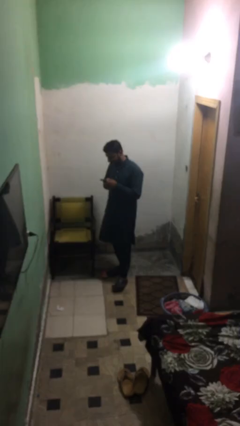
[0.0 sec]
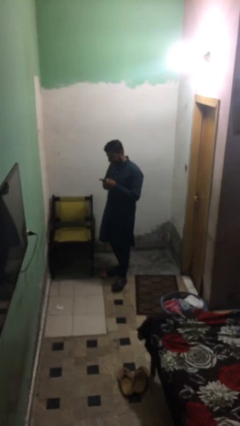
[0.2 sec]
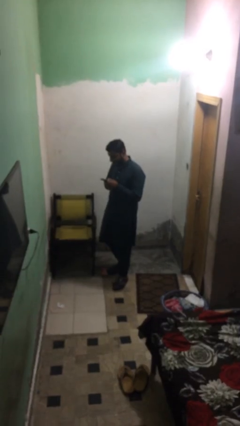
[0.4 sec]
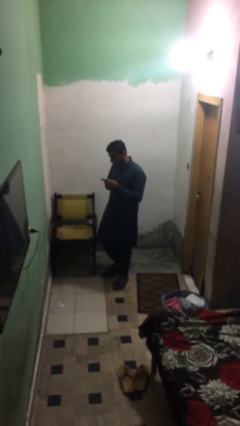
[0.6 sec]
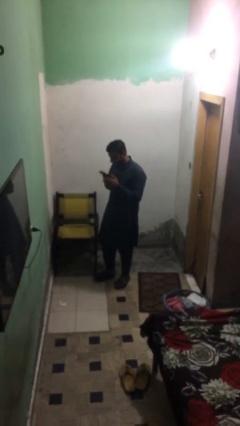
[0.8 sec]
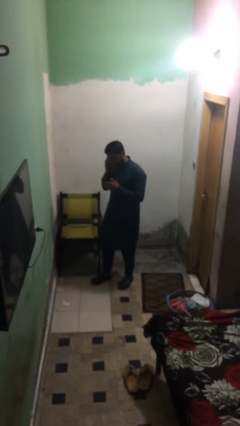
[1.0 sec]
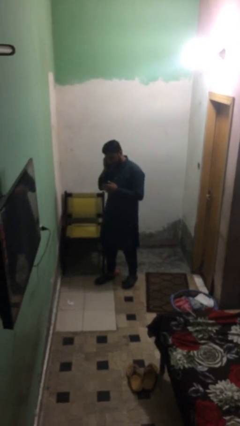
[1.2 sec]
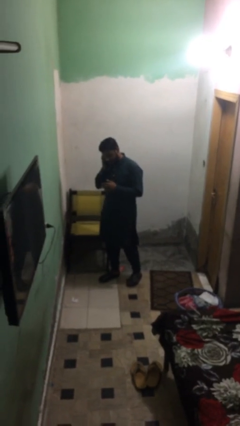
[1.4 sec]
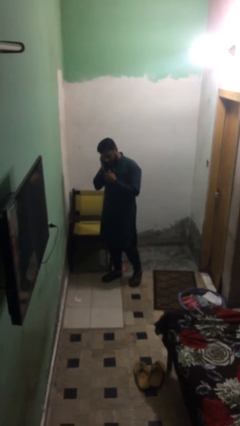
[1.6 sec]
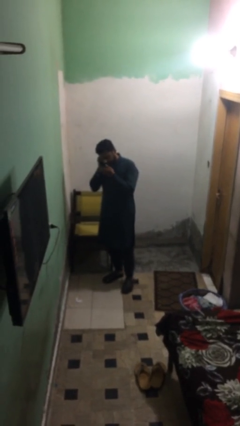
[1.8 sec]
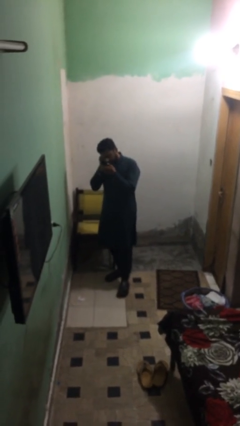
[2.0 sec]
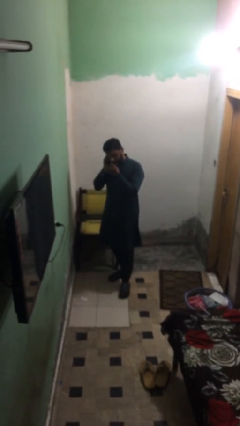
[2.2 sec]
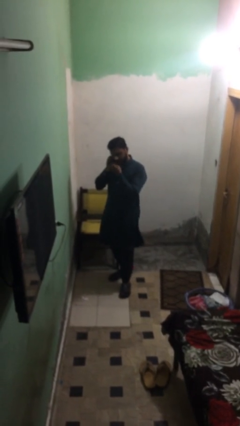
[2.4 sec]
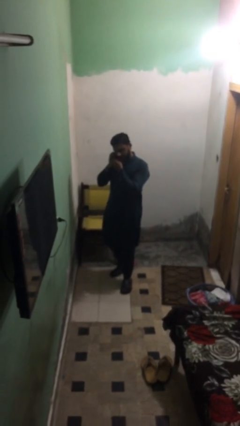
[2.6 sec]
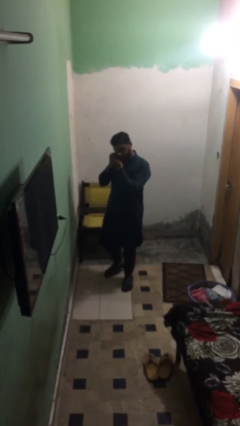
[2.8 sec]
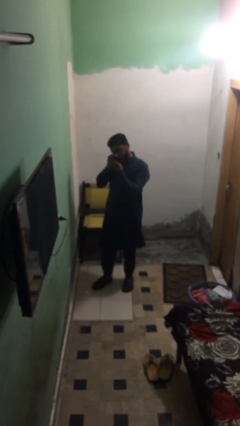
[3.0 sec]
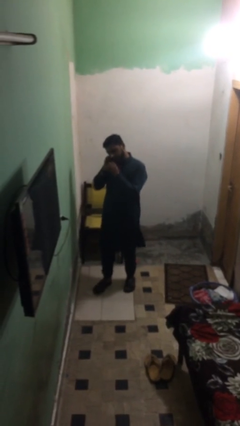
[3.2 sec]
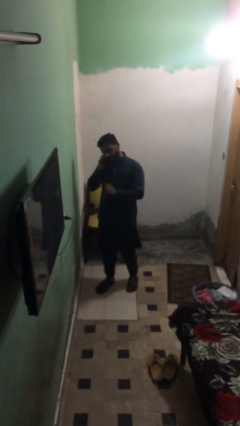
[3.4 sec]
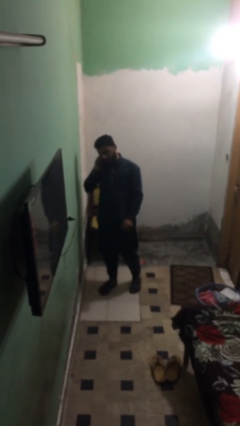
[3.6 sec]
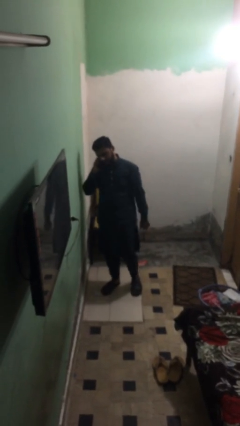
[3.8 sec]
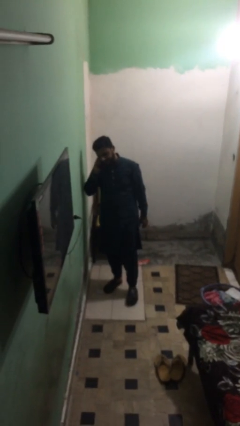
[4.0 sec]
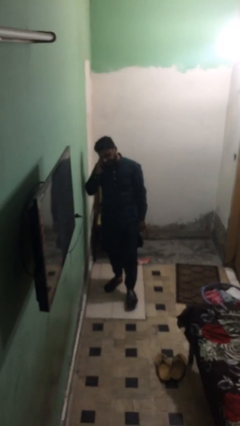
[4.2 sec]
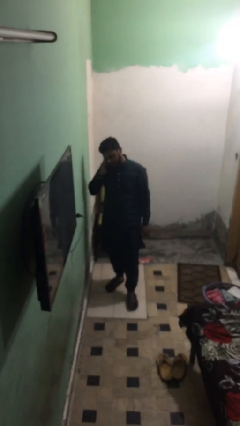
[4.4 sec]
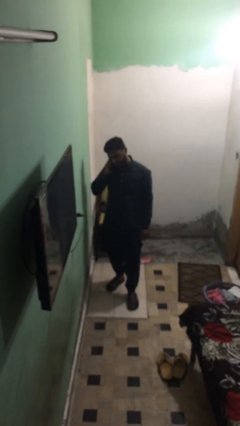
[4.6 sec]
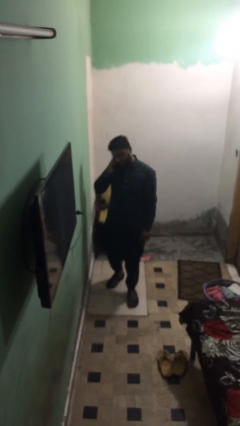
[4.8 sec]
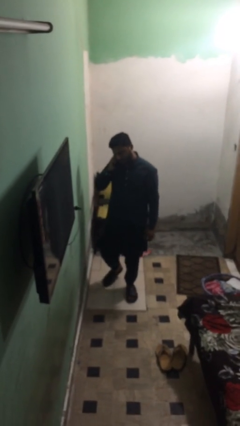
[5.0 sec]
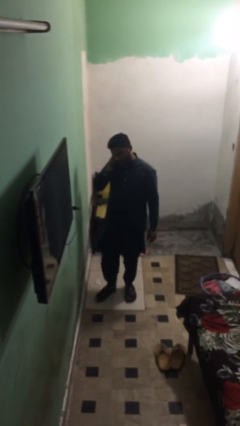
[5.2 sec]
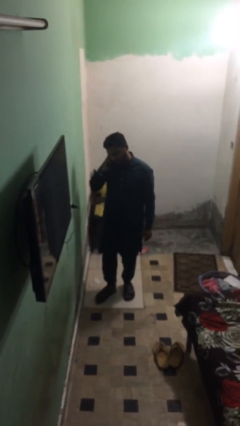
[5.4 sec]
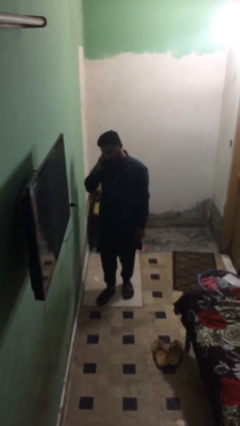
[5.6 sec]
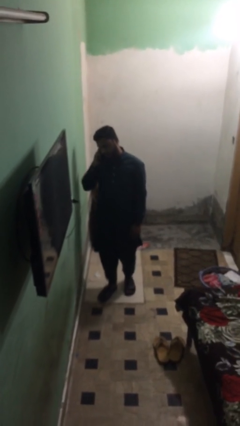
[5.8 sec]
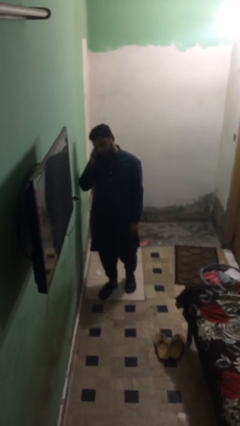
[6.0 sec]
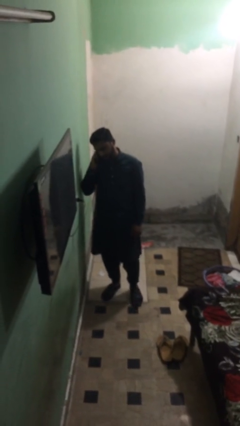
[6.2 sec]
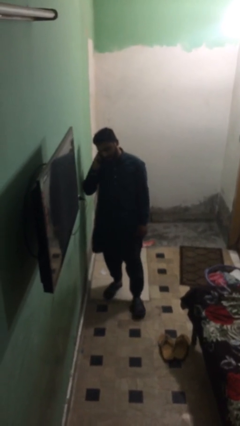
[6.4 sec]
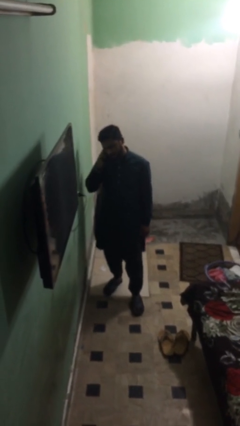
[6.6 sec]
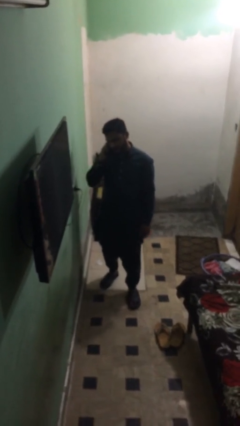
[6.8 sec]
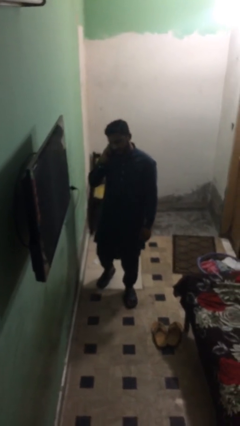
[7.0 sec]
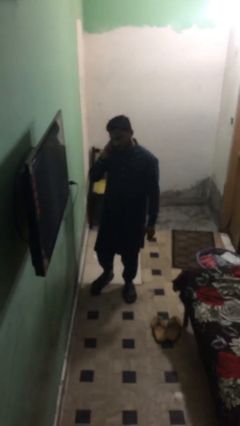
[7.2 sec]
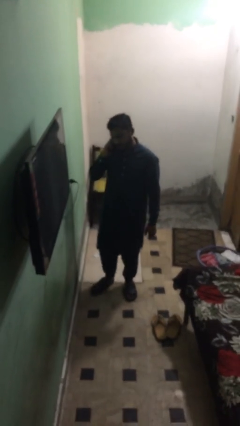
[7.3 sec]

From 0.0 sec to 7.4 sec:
person talks on phone

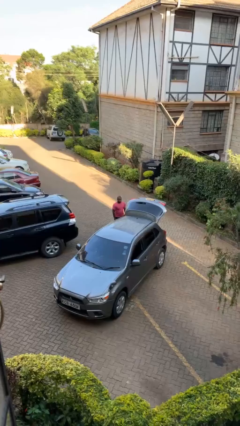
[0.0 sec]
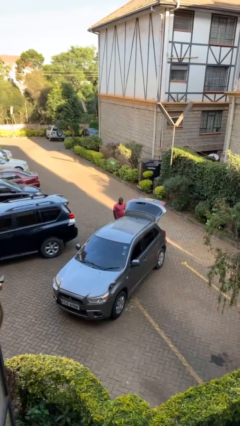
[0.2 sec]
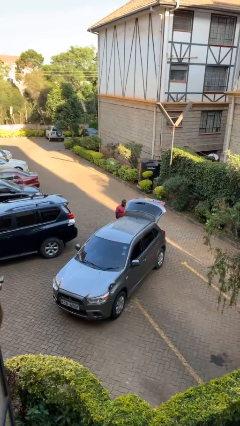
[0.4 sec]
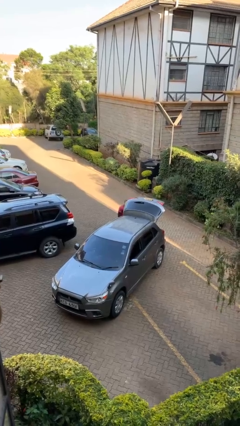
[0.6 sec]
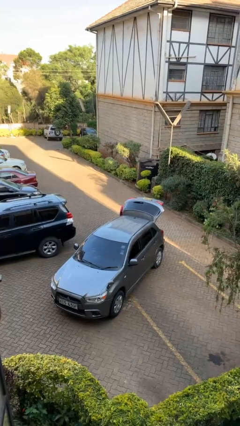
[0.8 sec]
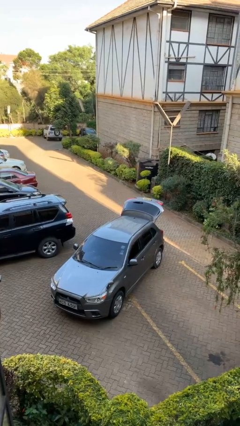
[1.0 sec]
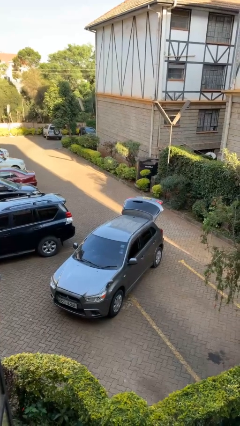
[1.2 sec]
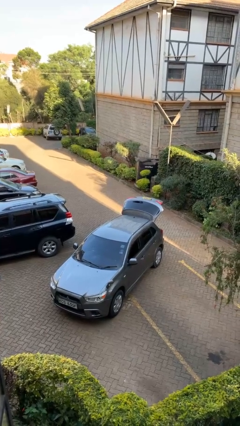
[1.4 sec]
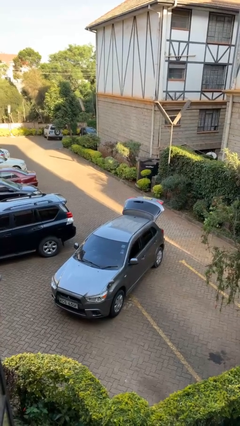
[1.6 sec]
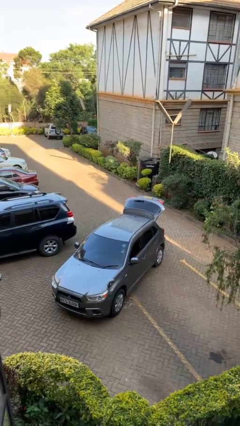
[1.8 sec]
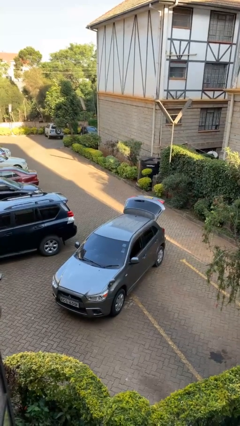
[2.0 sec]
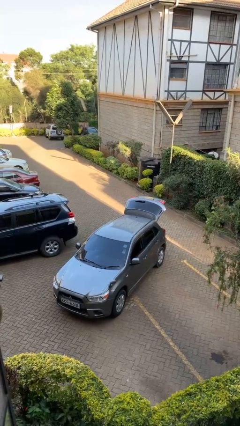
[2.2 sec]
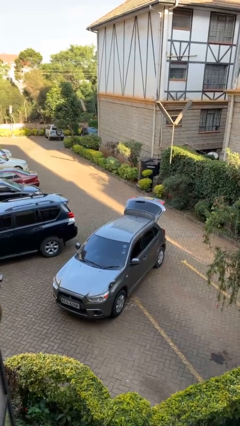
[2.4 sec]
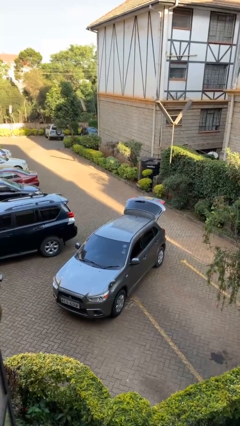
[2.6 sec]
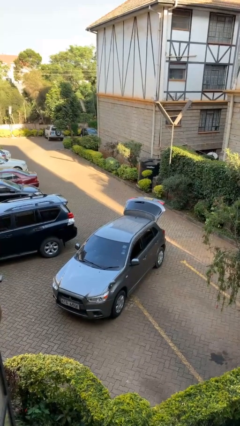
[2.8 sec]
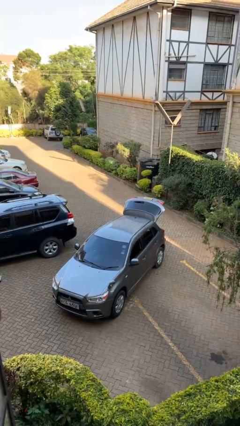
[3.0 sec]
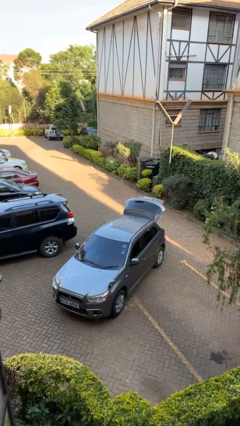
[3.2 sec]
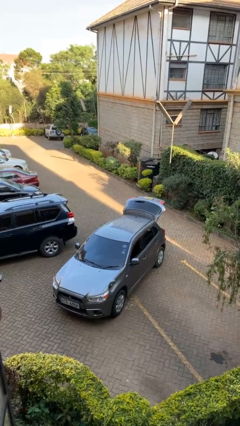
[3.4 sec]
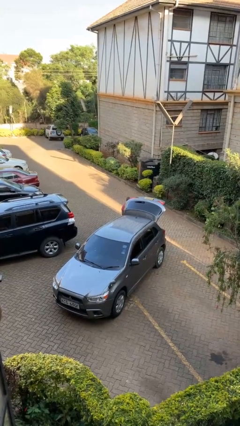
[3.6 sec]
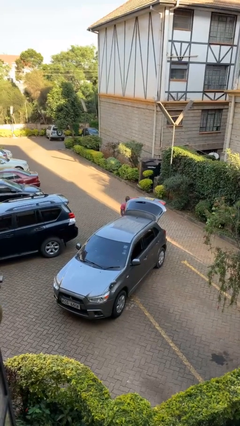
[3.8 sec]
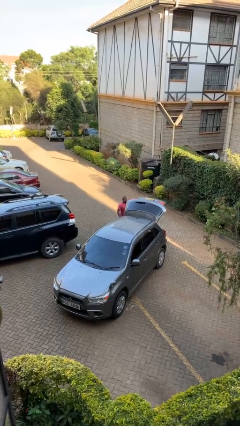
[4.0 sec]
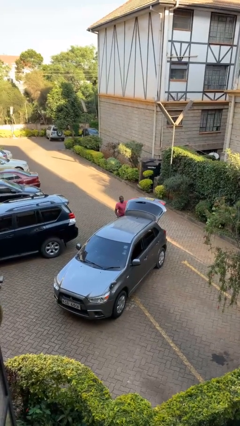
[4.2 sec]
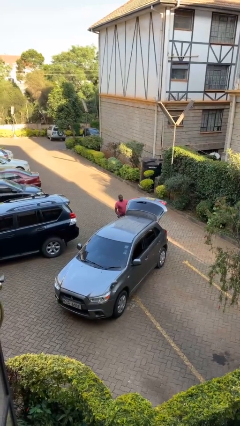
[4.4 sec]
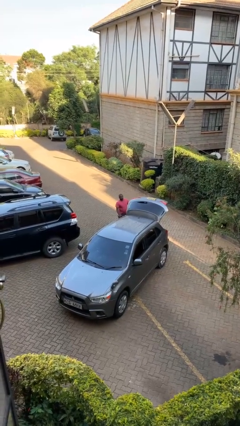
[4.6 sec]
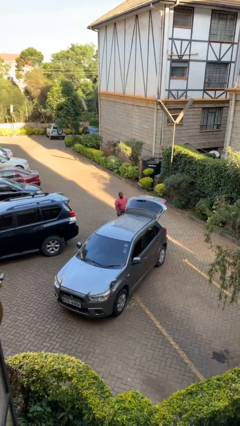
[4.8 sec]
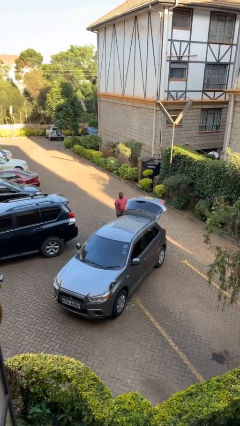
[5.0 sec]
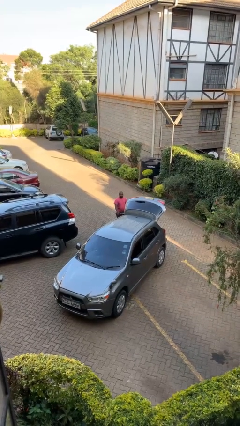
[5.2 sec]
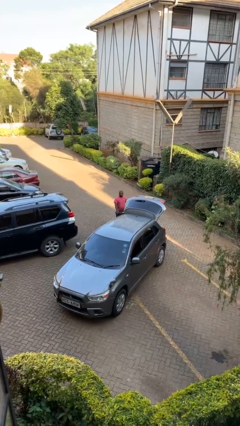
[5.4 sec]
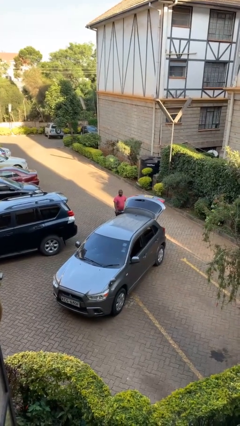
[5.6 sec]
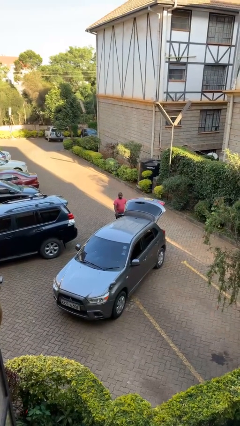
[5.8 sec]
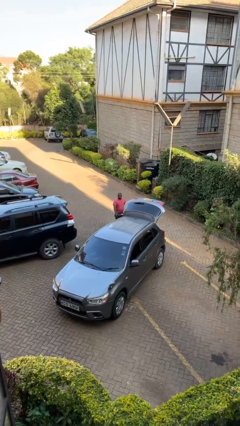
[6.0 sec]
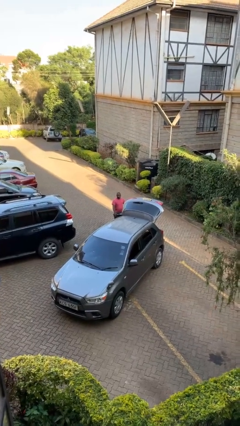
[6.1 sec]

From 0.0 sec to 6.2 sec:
person unloads car

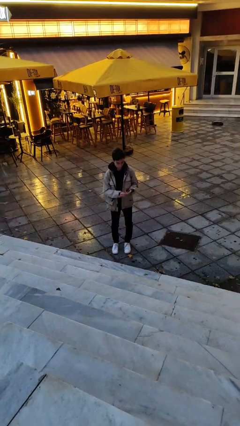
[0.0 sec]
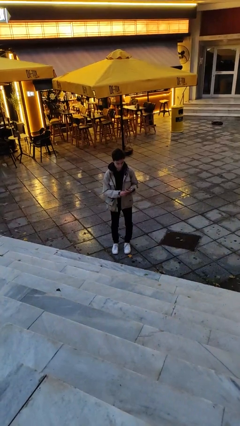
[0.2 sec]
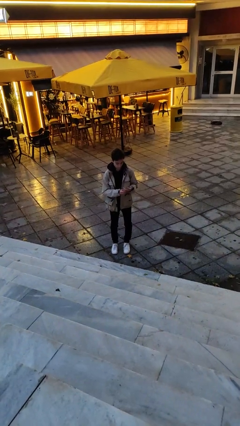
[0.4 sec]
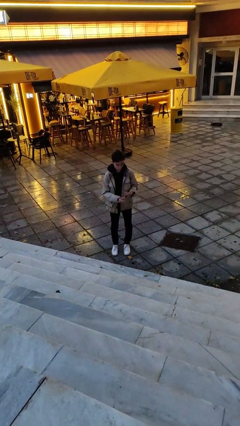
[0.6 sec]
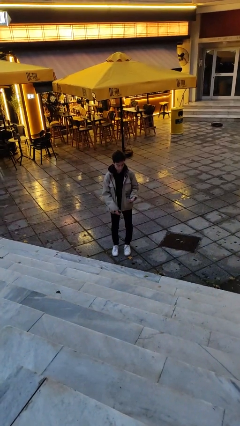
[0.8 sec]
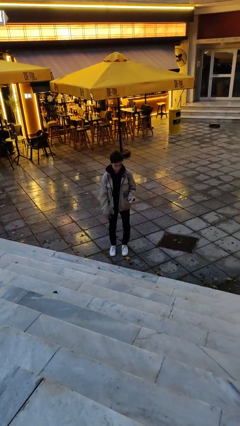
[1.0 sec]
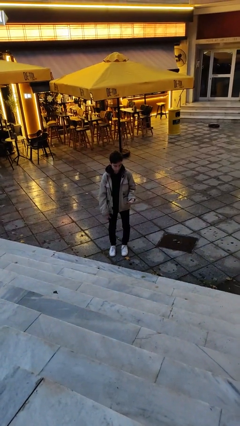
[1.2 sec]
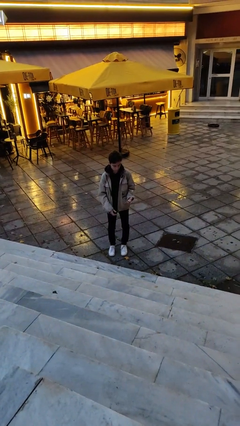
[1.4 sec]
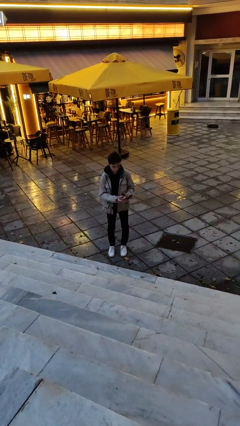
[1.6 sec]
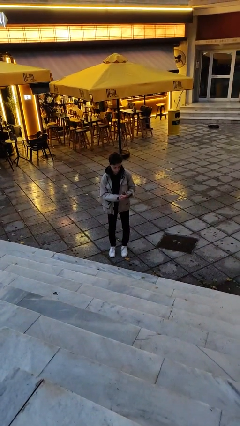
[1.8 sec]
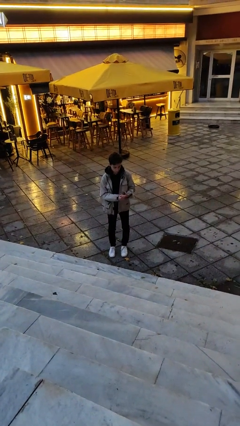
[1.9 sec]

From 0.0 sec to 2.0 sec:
person puts on ring

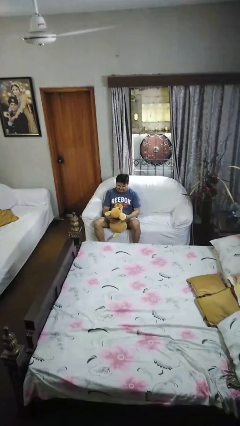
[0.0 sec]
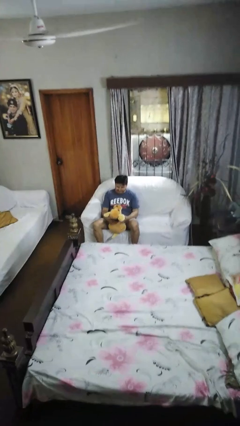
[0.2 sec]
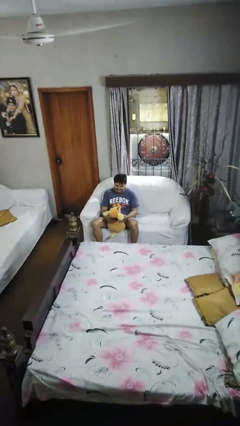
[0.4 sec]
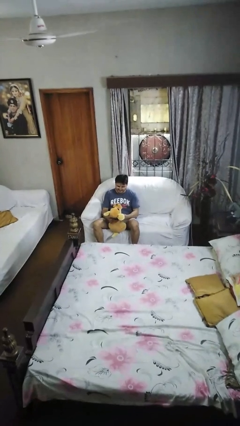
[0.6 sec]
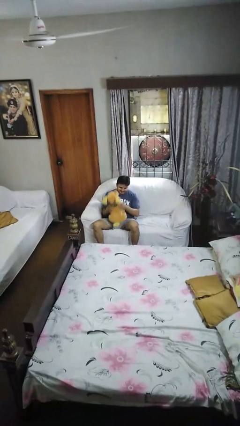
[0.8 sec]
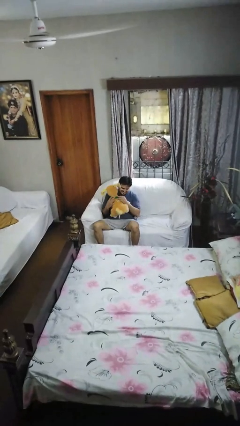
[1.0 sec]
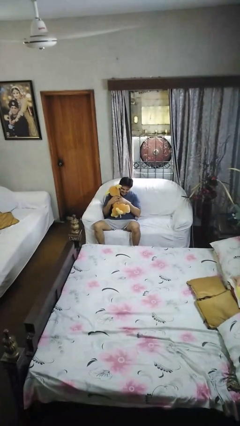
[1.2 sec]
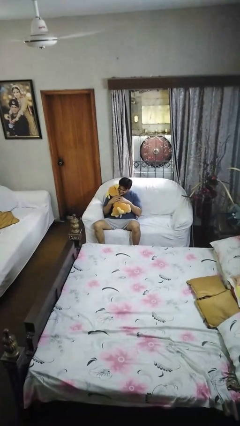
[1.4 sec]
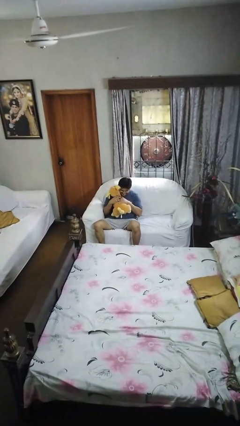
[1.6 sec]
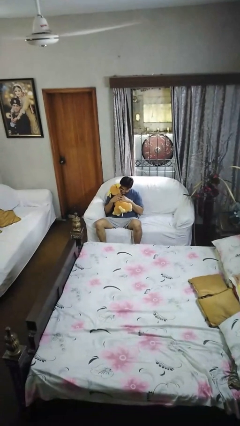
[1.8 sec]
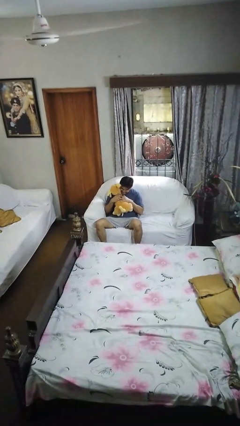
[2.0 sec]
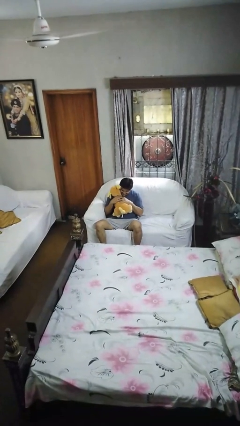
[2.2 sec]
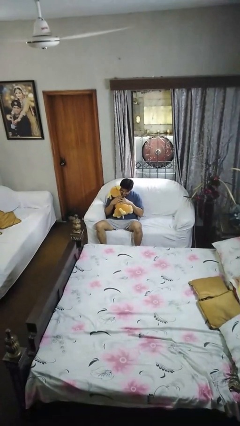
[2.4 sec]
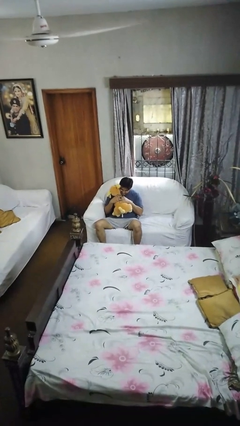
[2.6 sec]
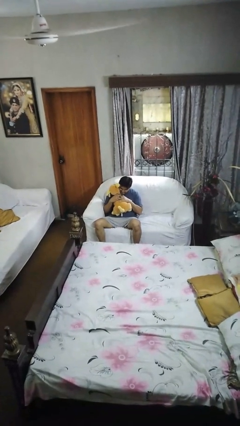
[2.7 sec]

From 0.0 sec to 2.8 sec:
person hugs stuffed animal
